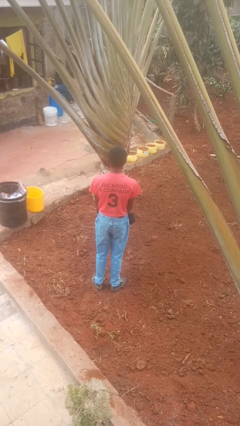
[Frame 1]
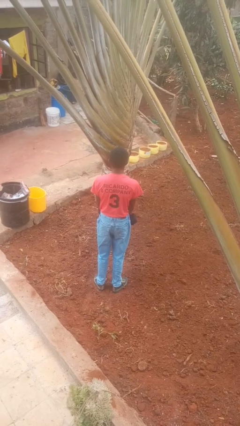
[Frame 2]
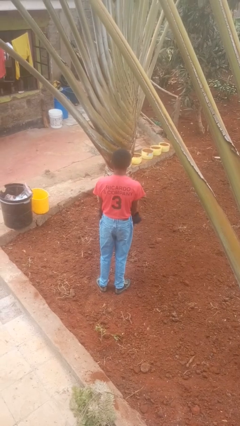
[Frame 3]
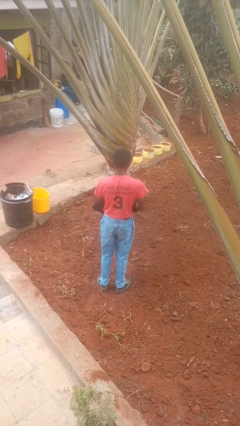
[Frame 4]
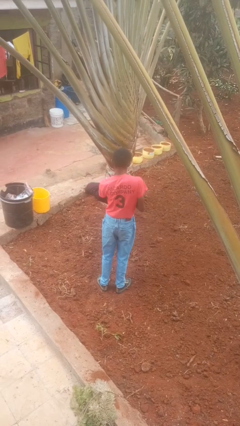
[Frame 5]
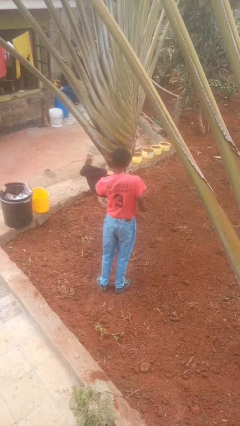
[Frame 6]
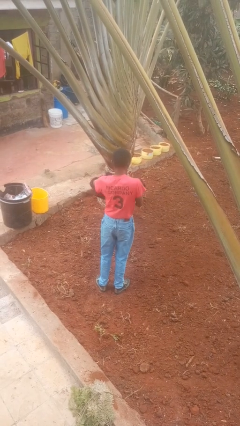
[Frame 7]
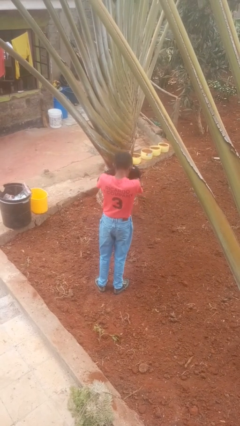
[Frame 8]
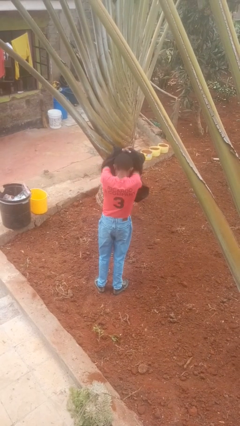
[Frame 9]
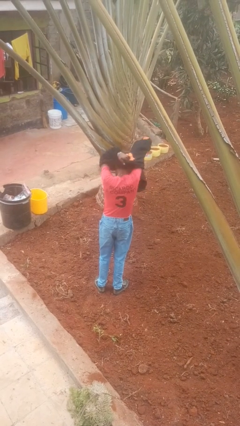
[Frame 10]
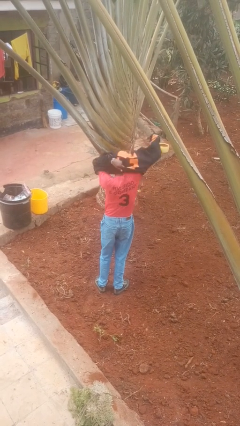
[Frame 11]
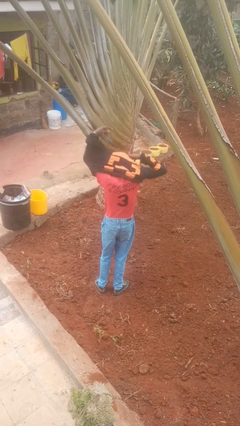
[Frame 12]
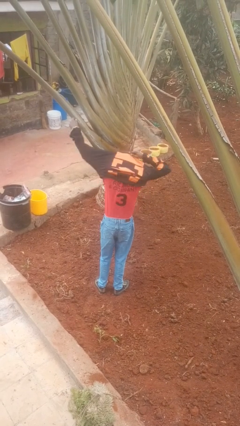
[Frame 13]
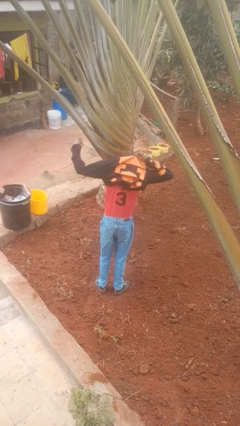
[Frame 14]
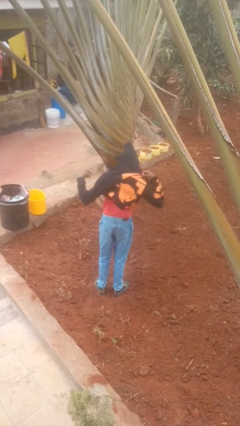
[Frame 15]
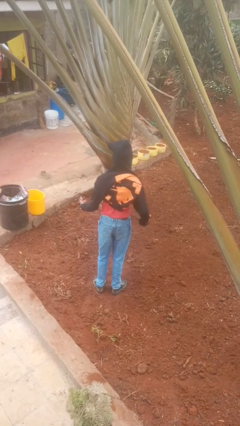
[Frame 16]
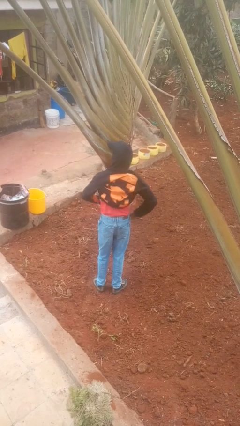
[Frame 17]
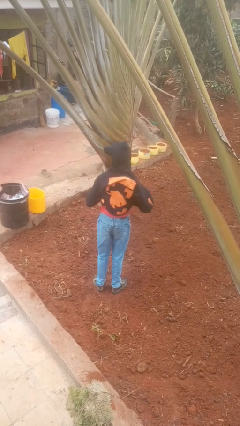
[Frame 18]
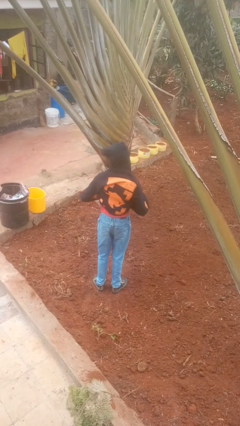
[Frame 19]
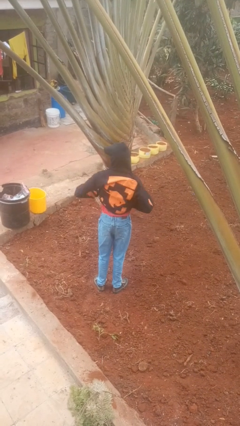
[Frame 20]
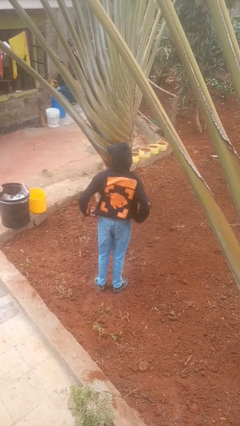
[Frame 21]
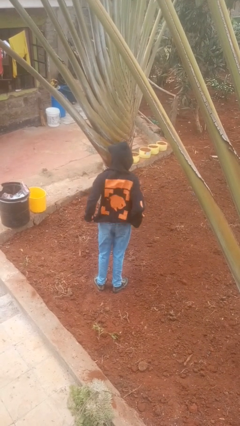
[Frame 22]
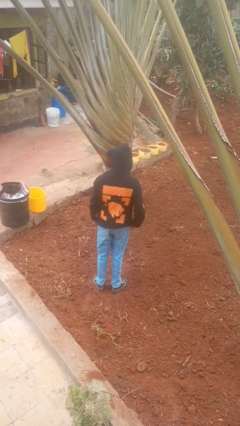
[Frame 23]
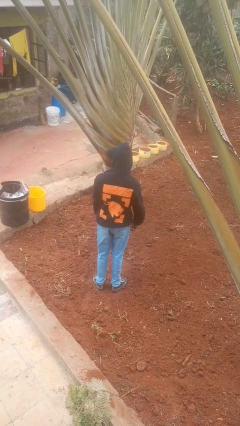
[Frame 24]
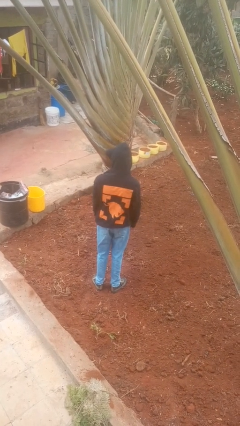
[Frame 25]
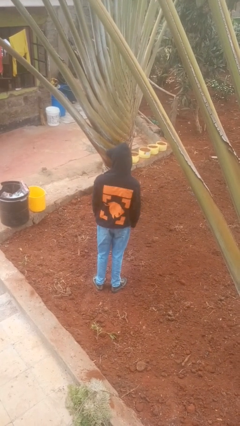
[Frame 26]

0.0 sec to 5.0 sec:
person puts on hoodie

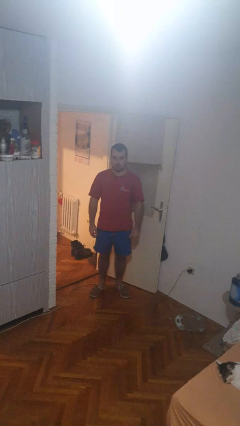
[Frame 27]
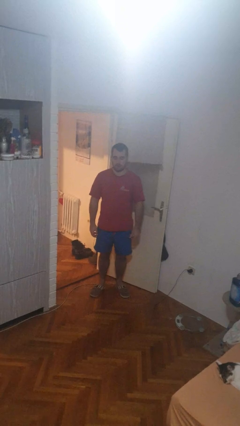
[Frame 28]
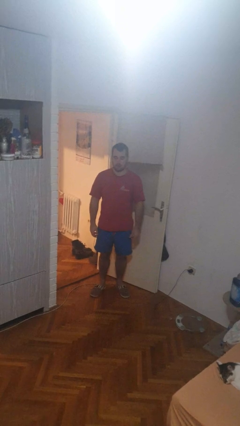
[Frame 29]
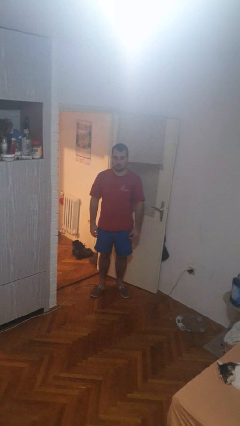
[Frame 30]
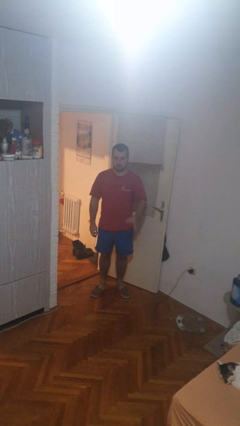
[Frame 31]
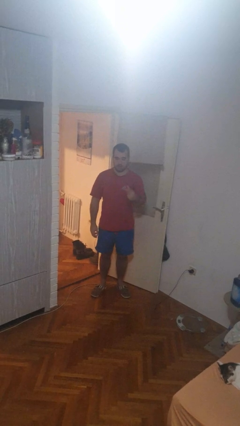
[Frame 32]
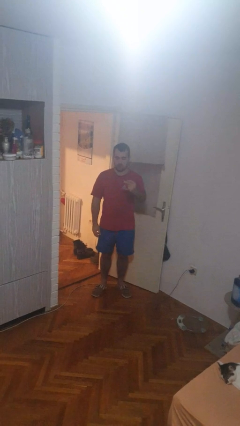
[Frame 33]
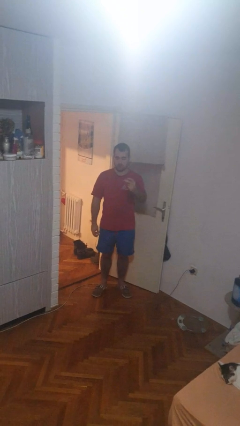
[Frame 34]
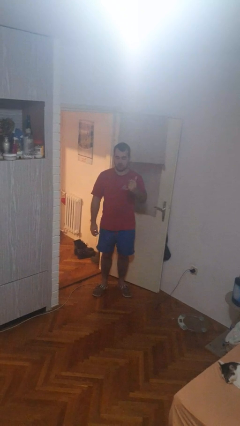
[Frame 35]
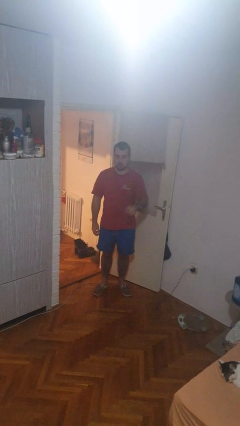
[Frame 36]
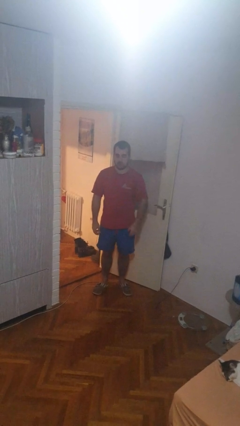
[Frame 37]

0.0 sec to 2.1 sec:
person snaps fingers

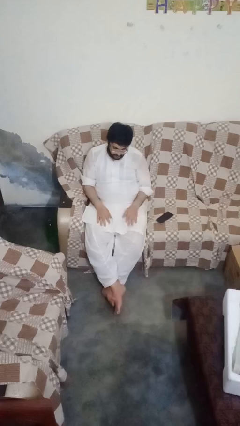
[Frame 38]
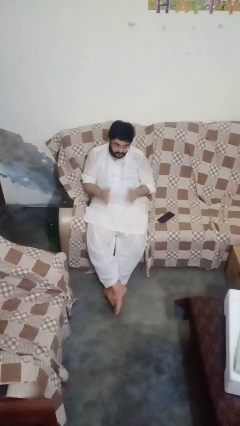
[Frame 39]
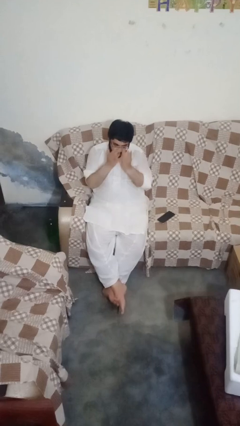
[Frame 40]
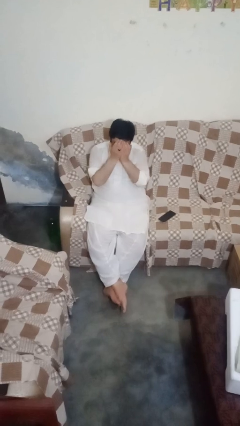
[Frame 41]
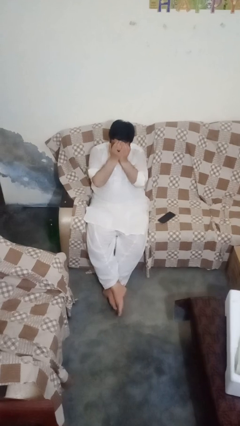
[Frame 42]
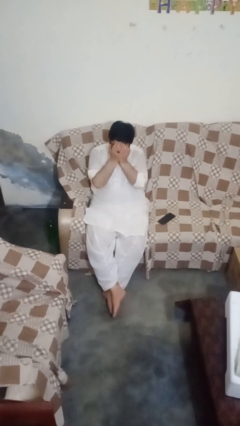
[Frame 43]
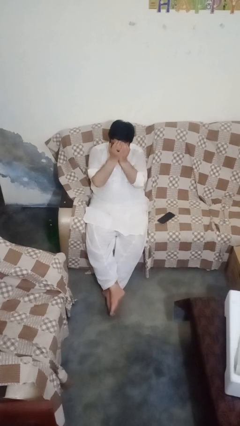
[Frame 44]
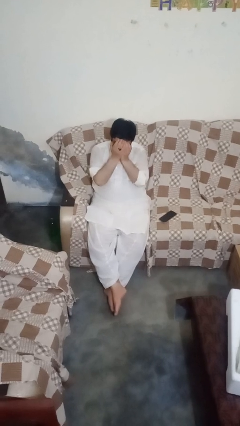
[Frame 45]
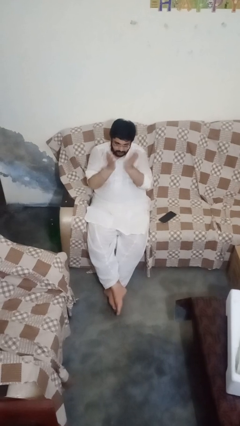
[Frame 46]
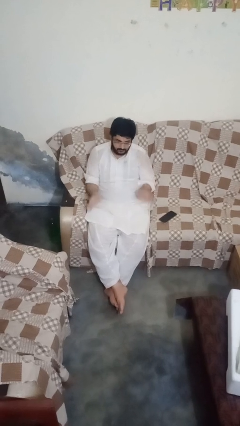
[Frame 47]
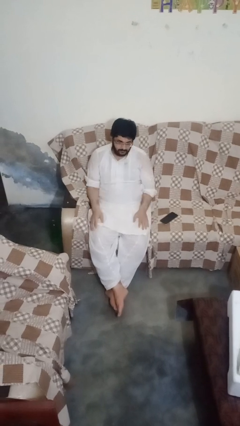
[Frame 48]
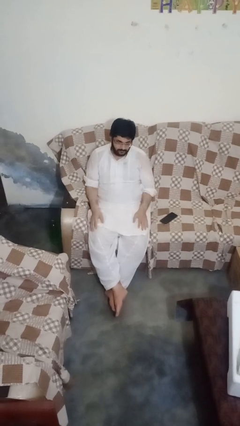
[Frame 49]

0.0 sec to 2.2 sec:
person covers face with hands

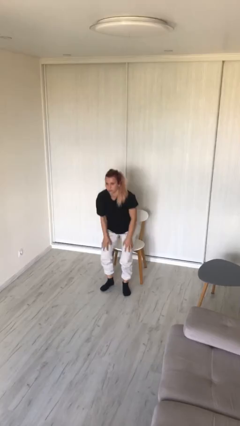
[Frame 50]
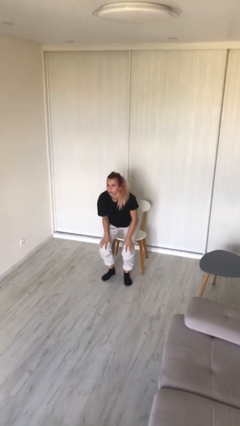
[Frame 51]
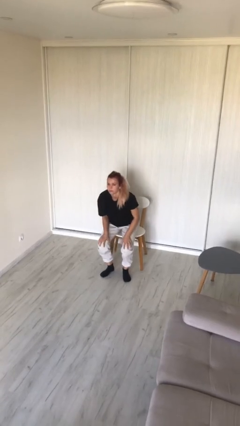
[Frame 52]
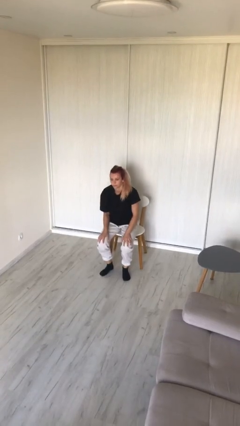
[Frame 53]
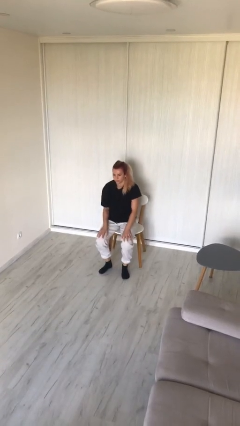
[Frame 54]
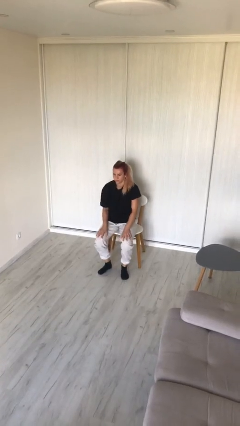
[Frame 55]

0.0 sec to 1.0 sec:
person sits down

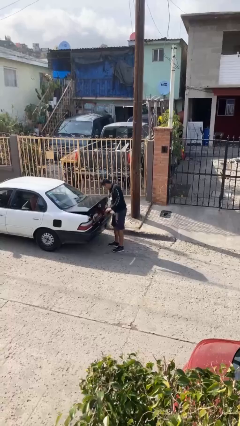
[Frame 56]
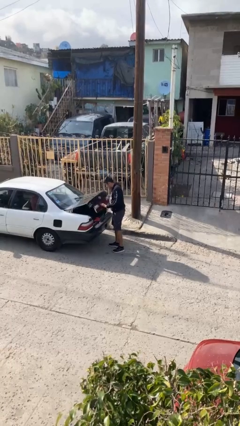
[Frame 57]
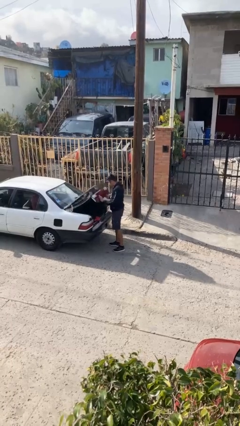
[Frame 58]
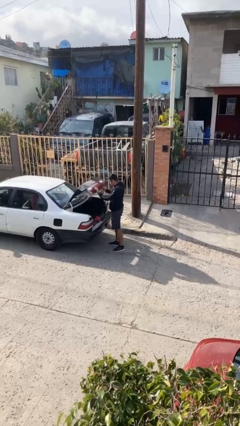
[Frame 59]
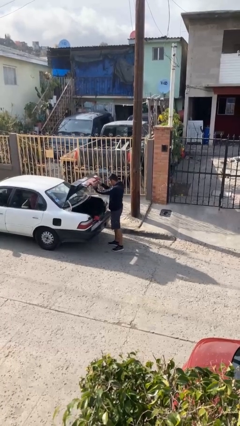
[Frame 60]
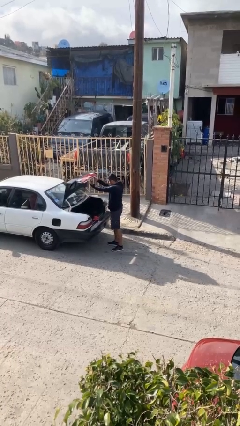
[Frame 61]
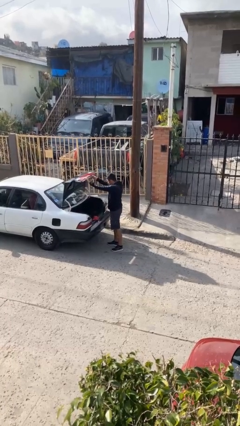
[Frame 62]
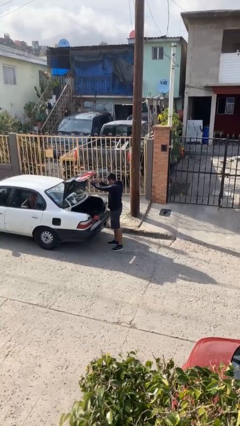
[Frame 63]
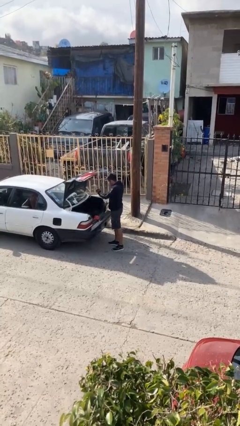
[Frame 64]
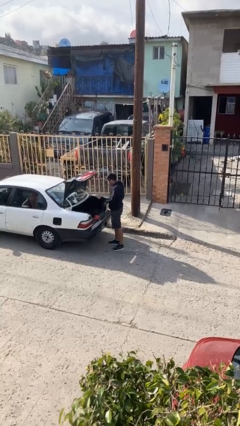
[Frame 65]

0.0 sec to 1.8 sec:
person opens car trunk

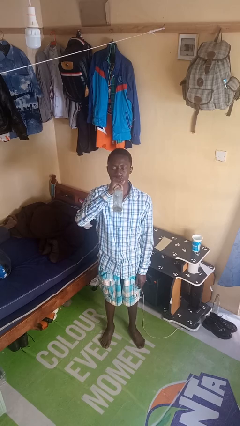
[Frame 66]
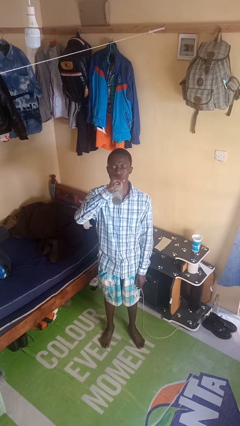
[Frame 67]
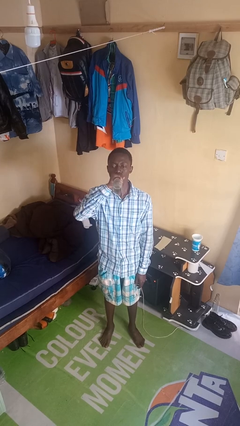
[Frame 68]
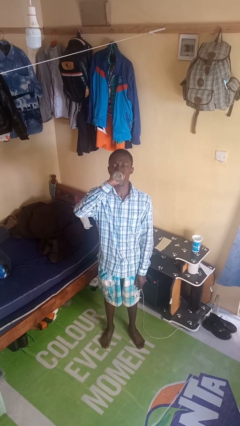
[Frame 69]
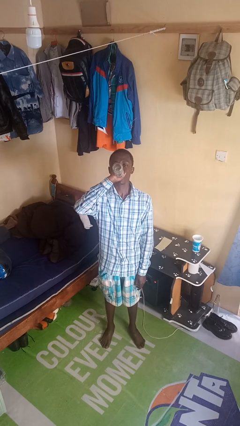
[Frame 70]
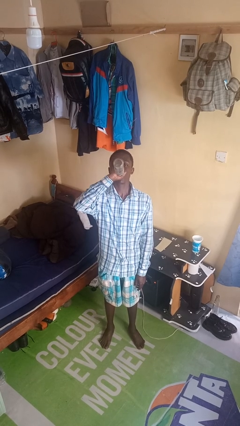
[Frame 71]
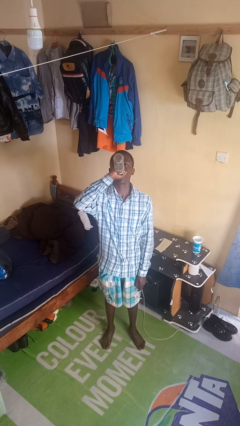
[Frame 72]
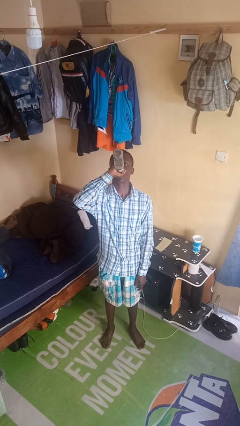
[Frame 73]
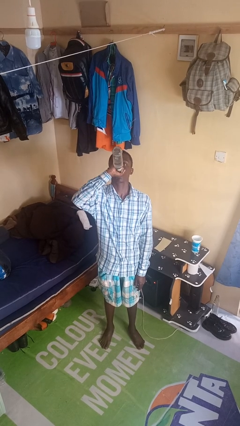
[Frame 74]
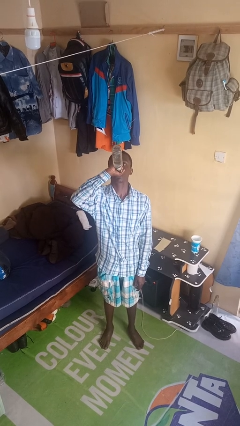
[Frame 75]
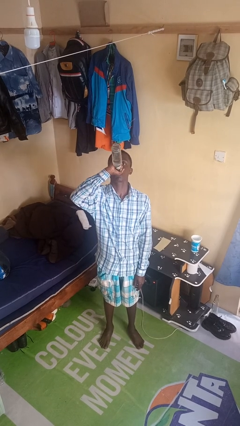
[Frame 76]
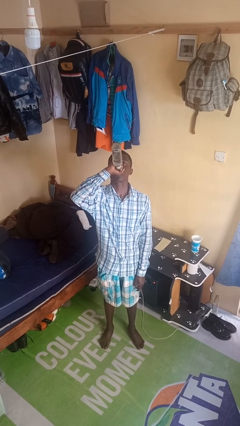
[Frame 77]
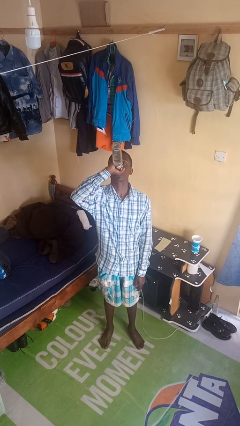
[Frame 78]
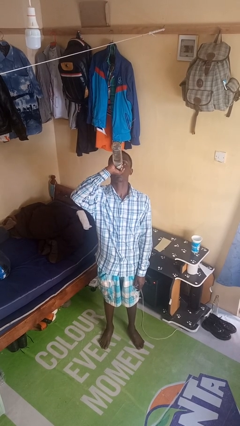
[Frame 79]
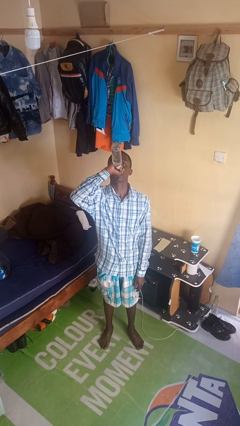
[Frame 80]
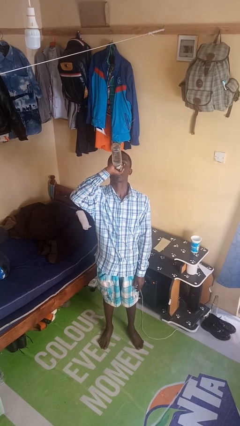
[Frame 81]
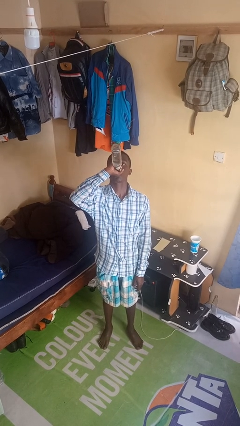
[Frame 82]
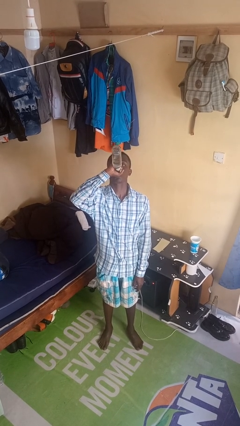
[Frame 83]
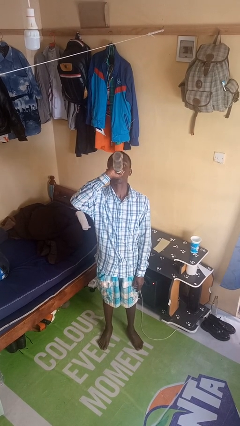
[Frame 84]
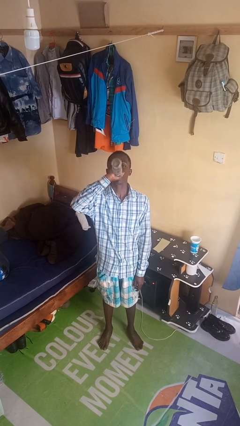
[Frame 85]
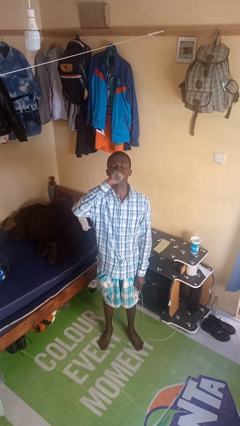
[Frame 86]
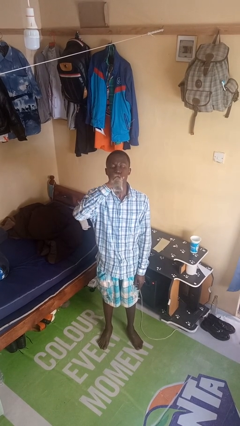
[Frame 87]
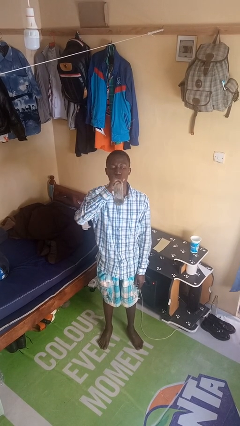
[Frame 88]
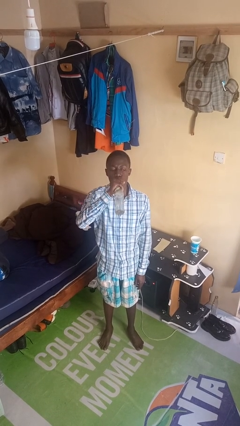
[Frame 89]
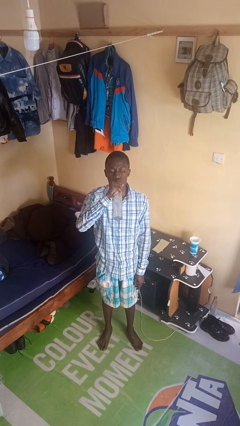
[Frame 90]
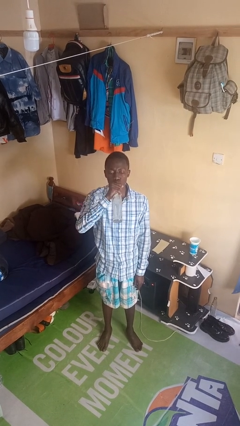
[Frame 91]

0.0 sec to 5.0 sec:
person drinks from bottle
